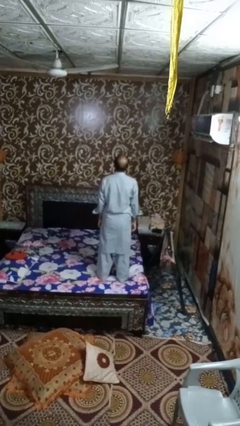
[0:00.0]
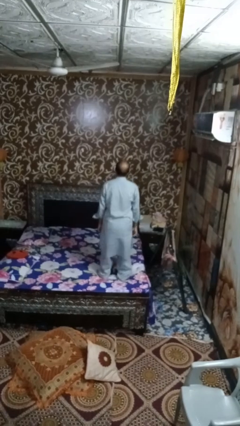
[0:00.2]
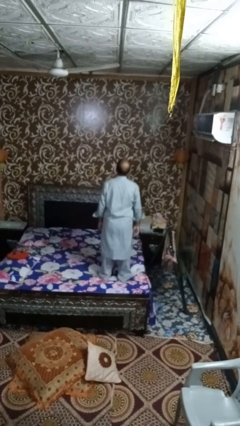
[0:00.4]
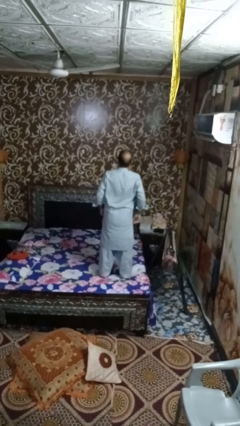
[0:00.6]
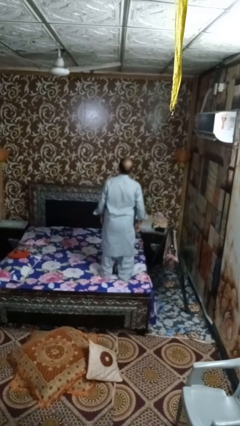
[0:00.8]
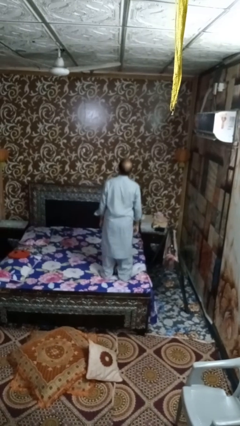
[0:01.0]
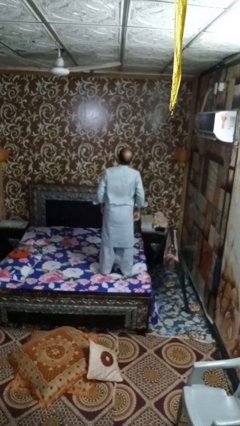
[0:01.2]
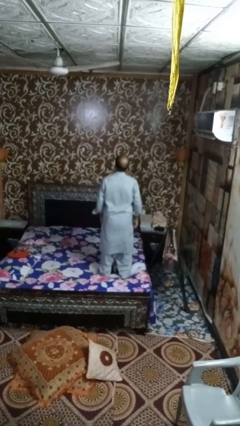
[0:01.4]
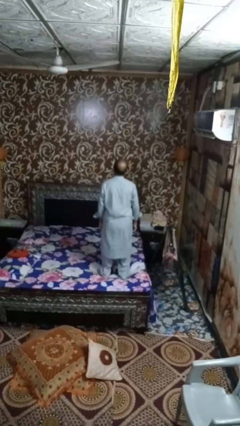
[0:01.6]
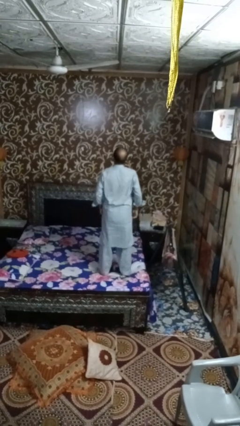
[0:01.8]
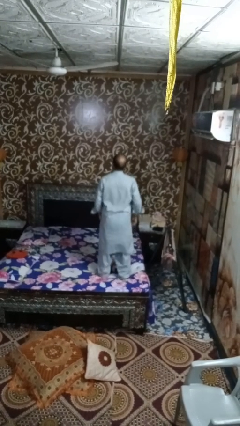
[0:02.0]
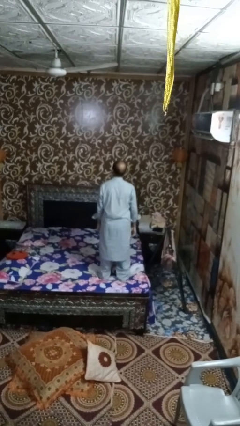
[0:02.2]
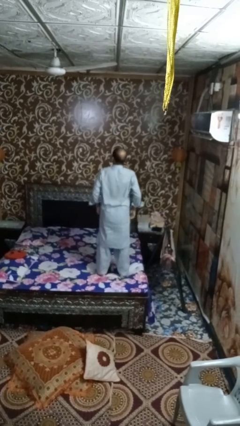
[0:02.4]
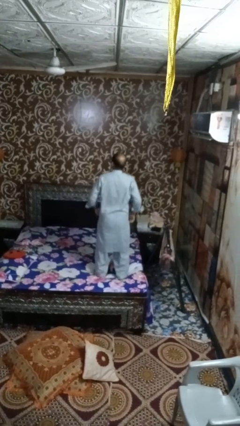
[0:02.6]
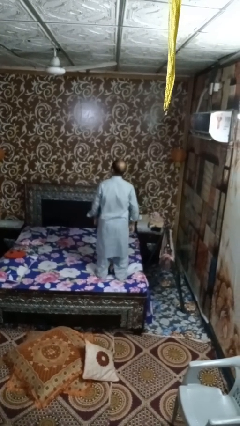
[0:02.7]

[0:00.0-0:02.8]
person jumps on bed

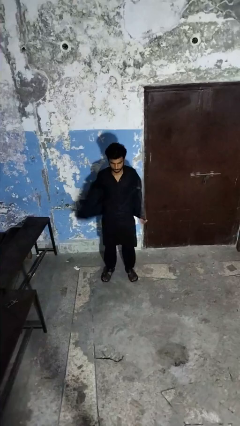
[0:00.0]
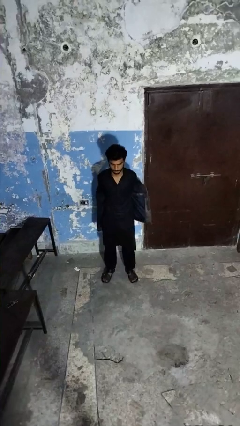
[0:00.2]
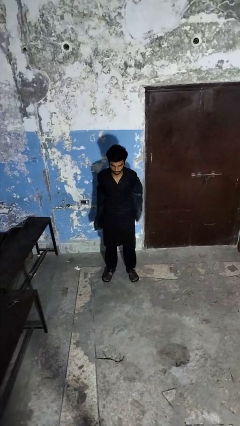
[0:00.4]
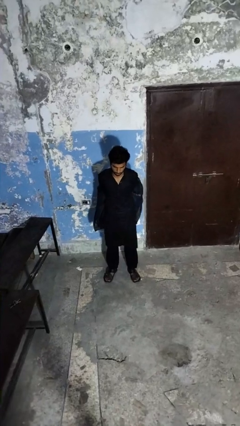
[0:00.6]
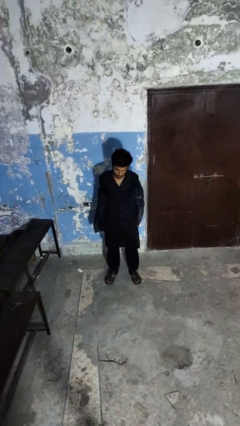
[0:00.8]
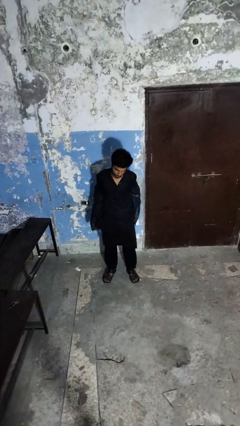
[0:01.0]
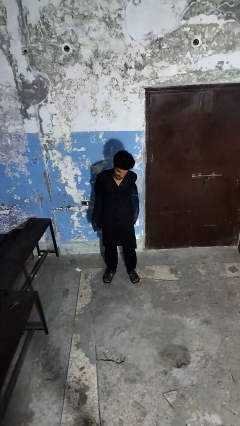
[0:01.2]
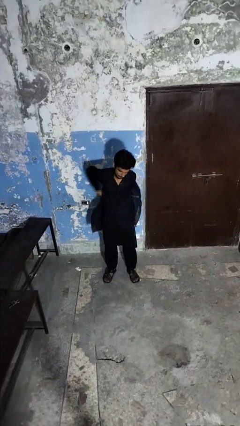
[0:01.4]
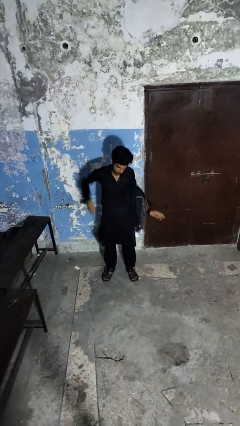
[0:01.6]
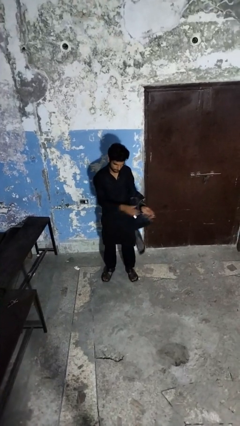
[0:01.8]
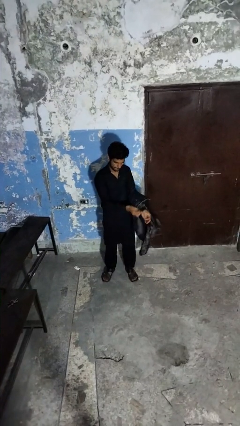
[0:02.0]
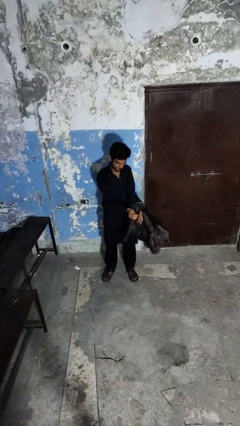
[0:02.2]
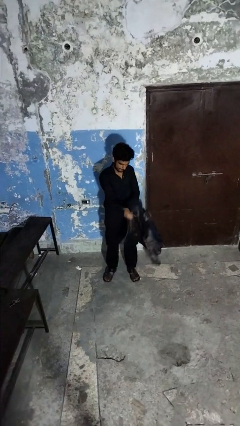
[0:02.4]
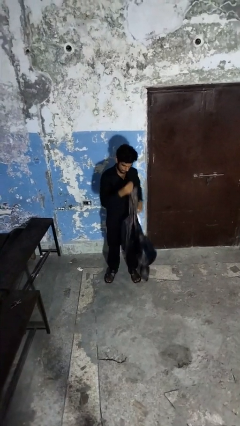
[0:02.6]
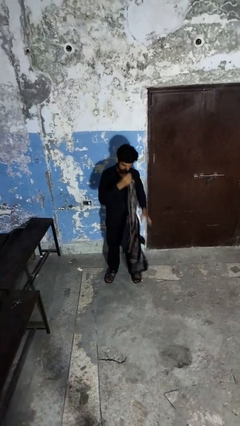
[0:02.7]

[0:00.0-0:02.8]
person takes off jacket

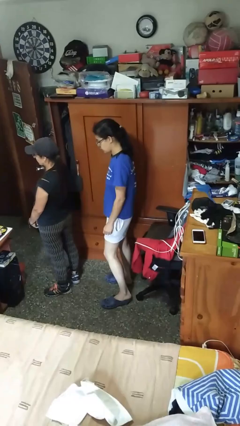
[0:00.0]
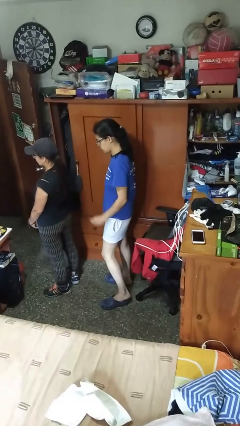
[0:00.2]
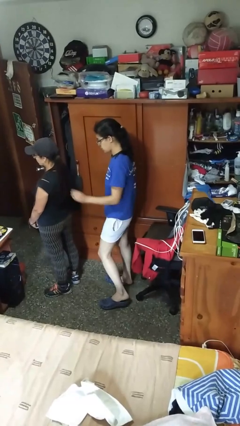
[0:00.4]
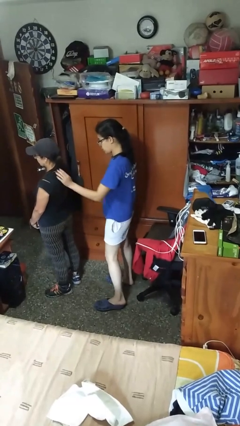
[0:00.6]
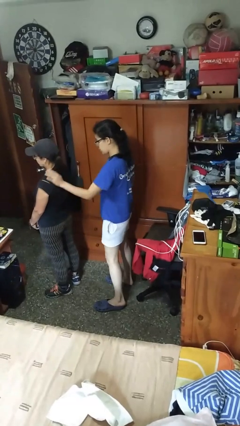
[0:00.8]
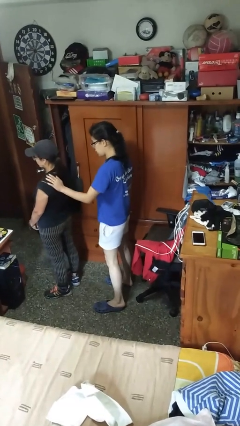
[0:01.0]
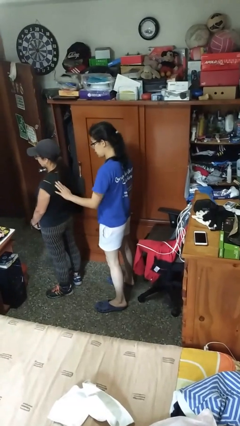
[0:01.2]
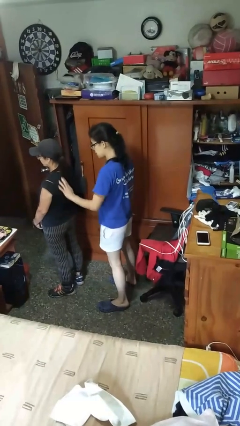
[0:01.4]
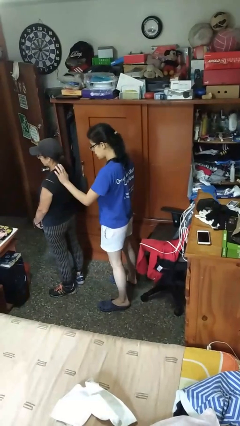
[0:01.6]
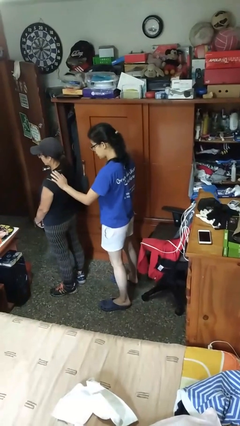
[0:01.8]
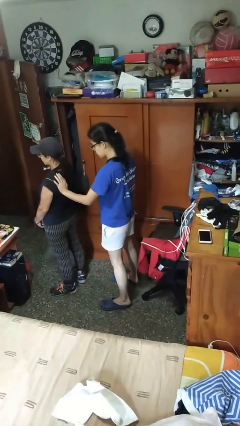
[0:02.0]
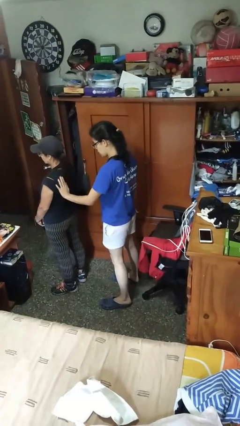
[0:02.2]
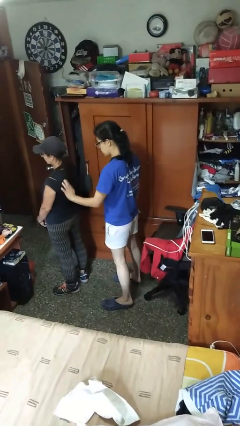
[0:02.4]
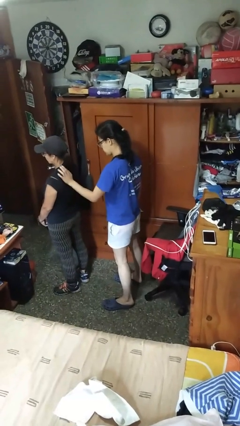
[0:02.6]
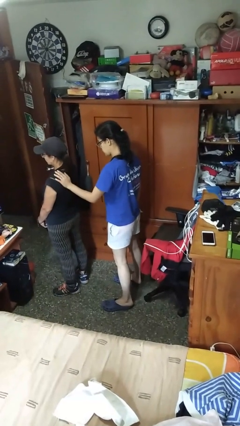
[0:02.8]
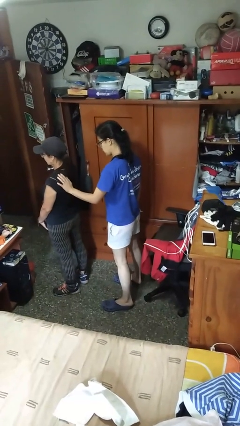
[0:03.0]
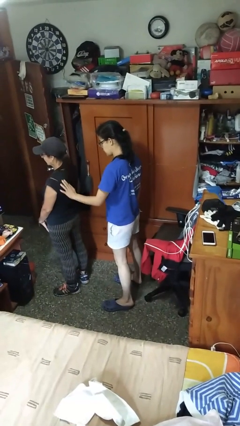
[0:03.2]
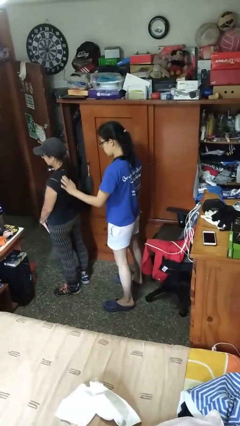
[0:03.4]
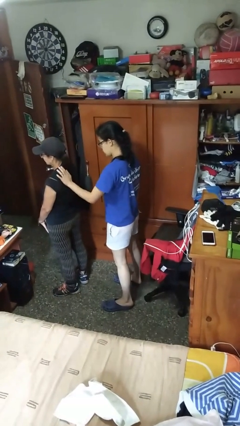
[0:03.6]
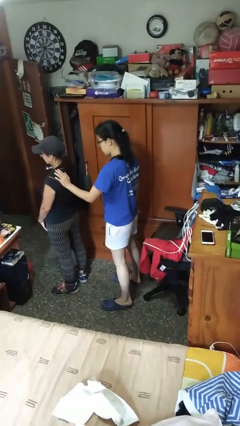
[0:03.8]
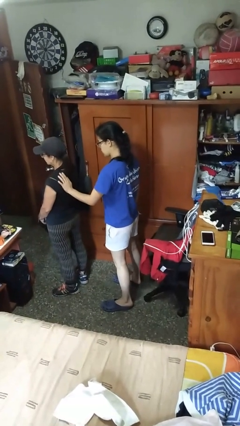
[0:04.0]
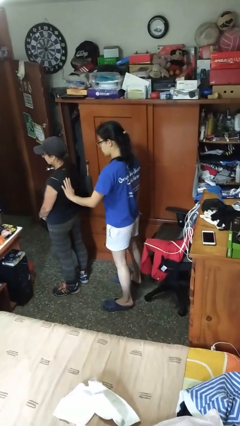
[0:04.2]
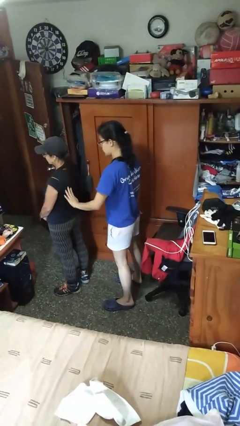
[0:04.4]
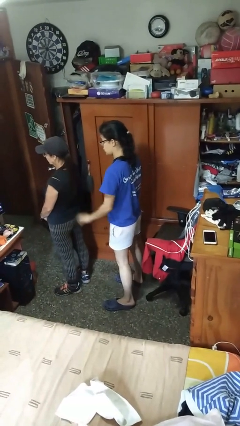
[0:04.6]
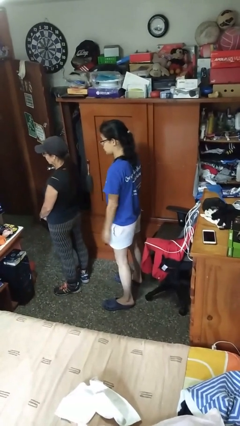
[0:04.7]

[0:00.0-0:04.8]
person touches back of person

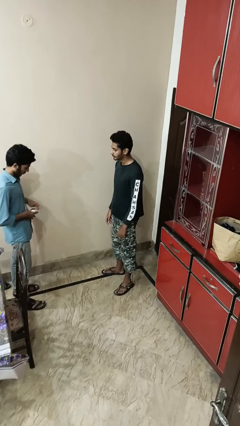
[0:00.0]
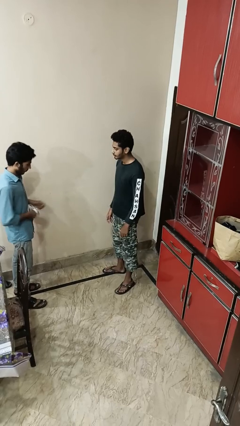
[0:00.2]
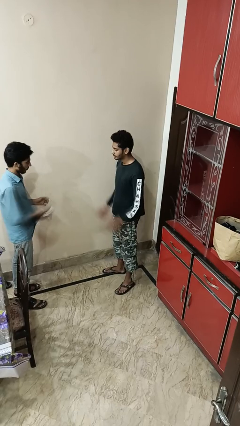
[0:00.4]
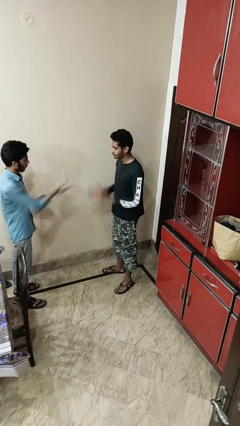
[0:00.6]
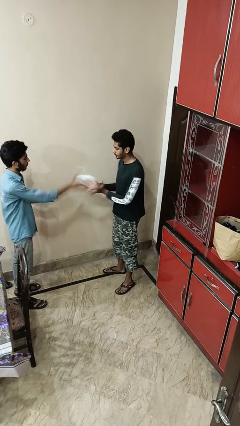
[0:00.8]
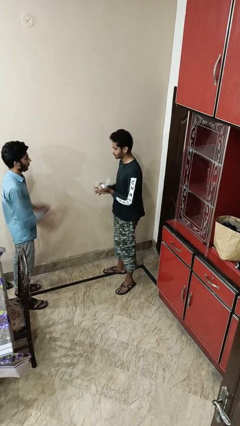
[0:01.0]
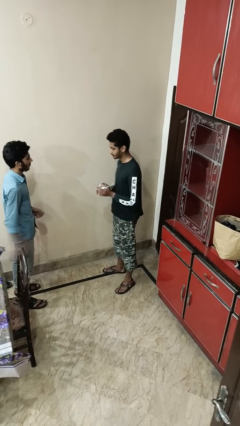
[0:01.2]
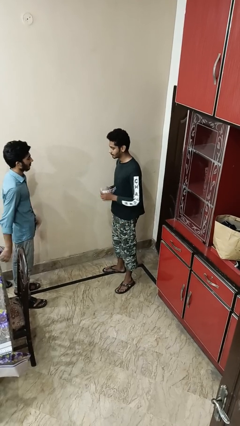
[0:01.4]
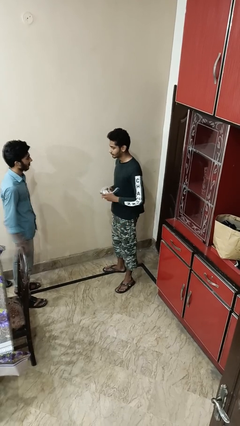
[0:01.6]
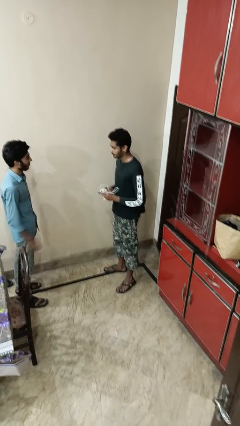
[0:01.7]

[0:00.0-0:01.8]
person catches object from person

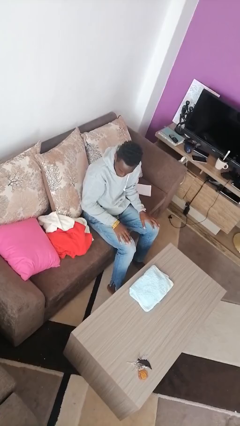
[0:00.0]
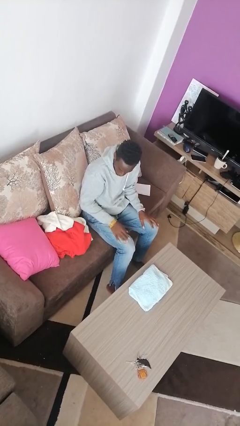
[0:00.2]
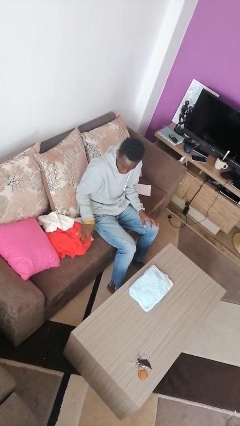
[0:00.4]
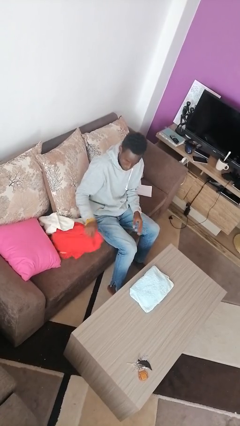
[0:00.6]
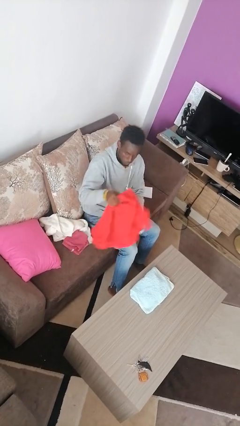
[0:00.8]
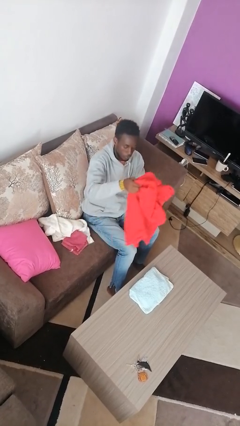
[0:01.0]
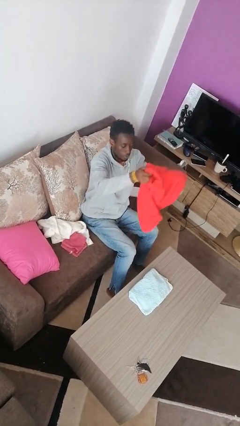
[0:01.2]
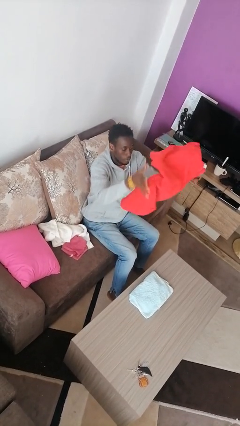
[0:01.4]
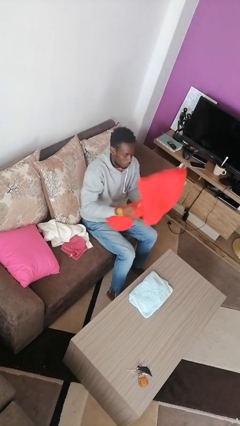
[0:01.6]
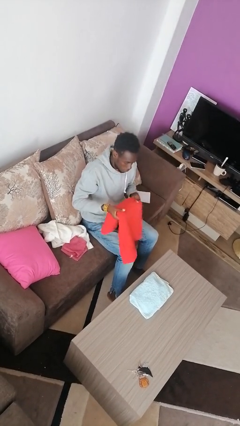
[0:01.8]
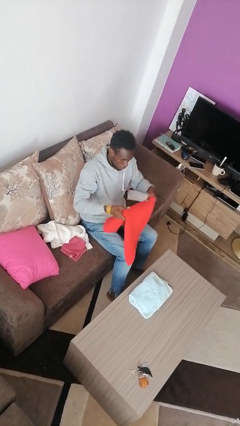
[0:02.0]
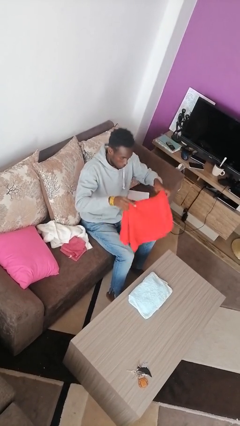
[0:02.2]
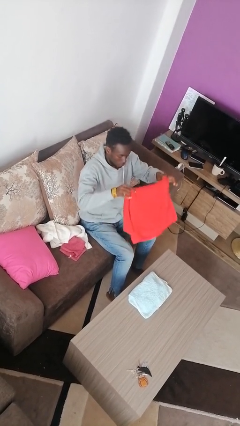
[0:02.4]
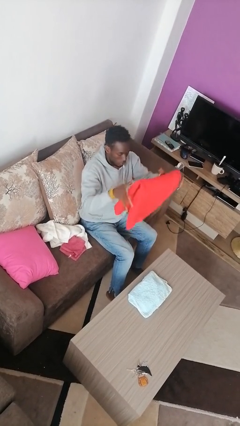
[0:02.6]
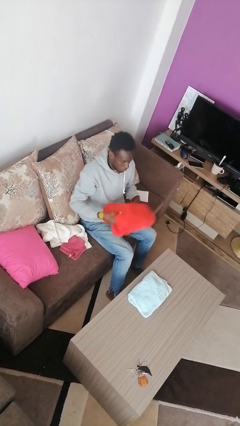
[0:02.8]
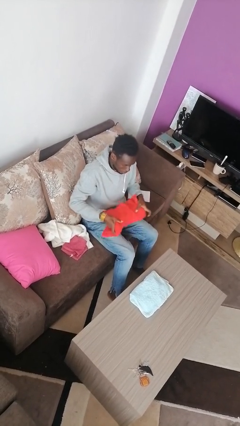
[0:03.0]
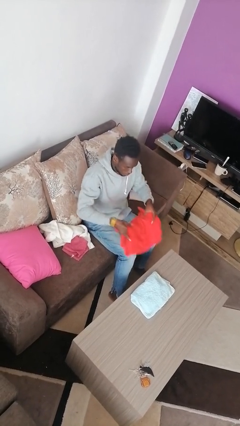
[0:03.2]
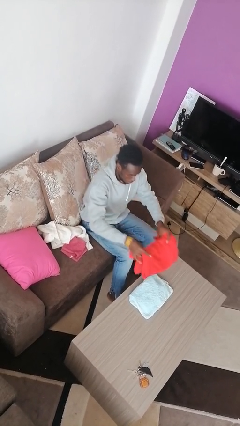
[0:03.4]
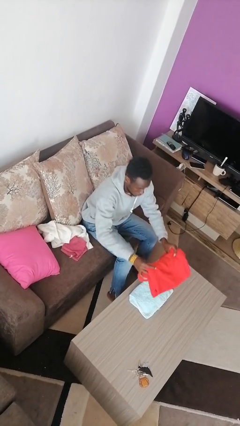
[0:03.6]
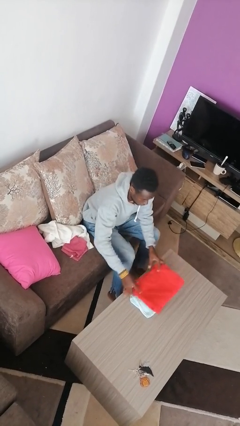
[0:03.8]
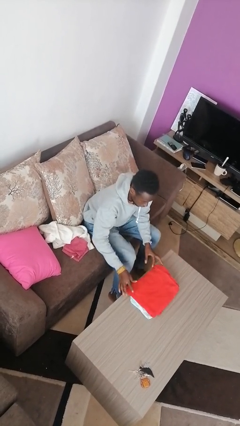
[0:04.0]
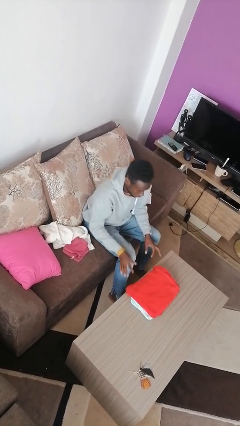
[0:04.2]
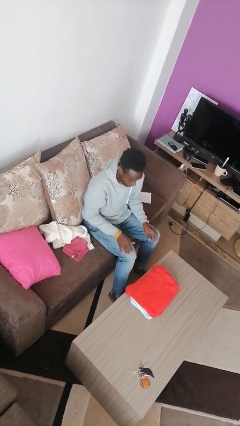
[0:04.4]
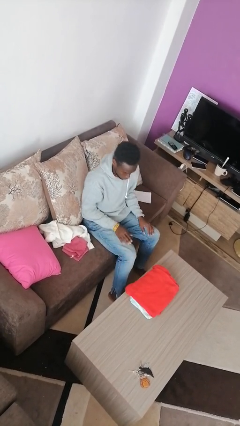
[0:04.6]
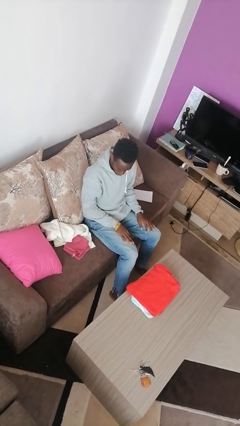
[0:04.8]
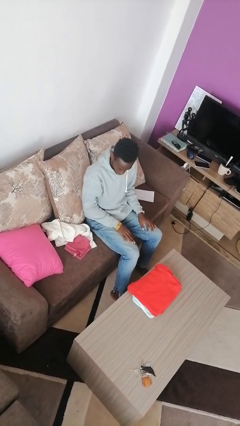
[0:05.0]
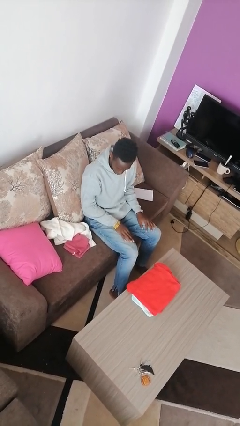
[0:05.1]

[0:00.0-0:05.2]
person folds towel

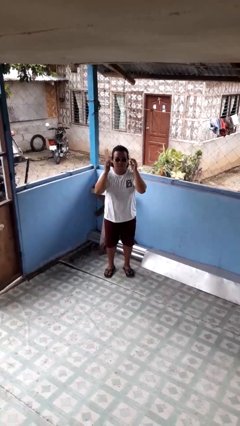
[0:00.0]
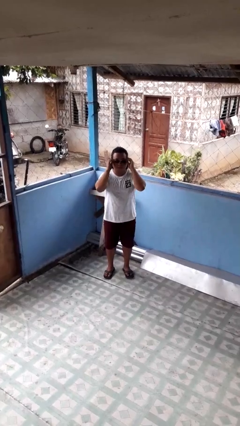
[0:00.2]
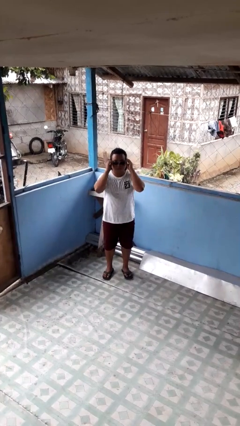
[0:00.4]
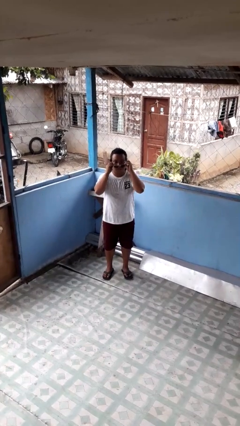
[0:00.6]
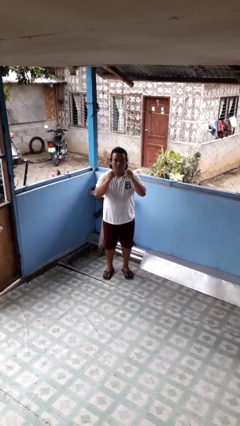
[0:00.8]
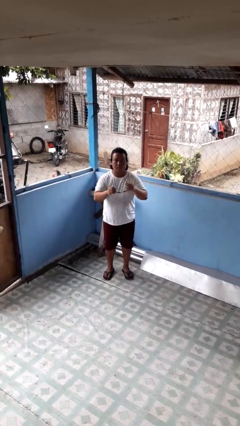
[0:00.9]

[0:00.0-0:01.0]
person takes off sunglasses
